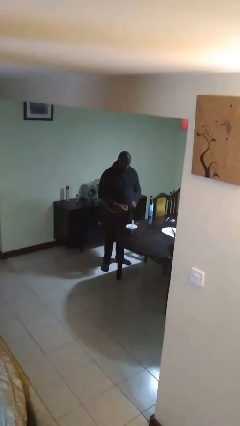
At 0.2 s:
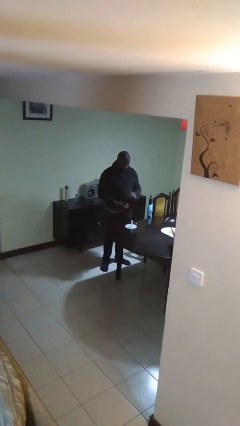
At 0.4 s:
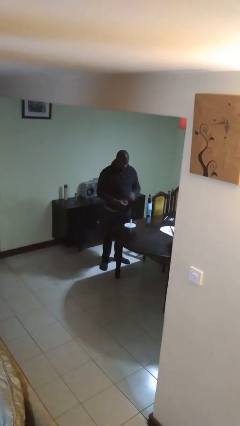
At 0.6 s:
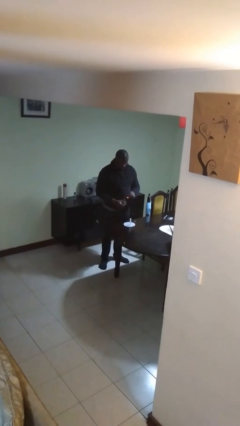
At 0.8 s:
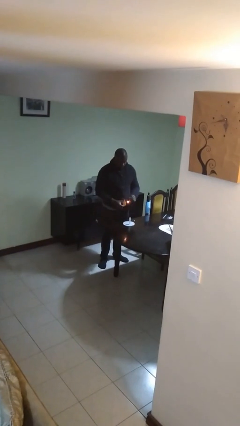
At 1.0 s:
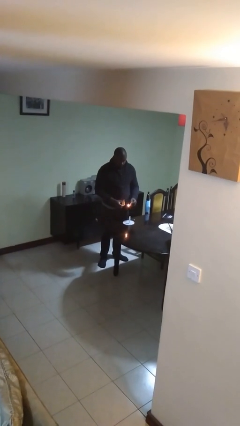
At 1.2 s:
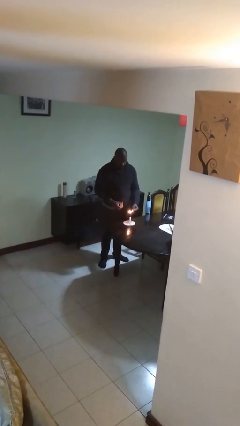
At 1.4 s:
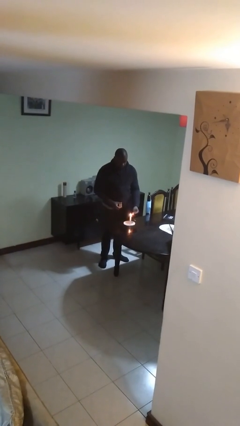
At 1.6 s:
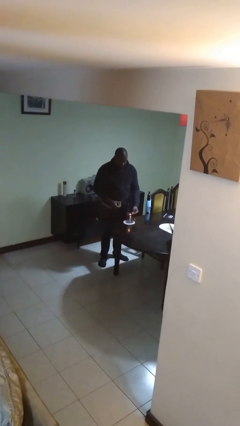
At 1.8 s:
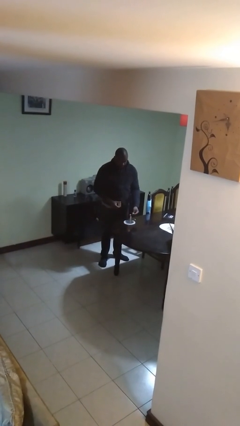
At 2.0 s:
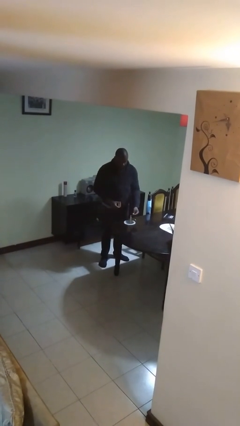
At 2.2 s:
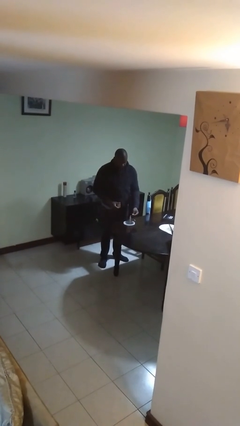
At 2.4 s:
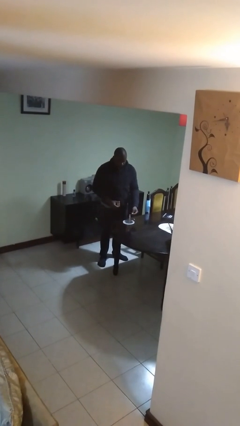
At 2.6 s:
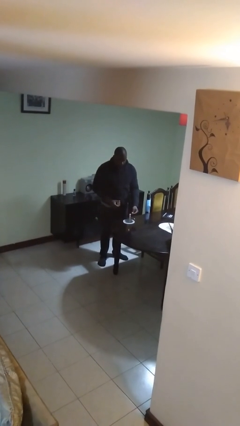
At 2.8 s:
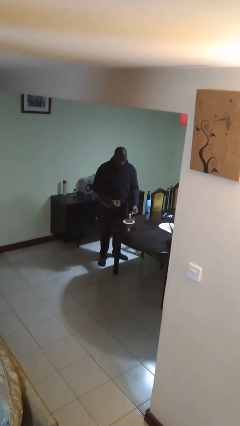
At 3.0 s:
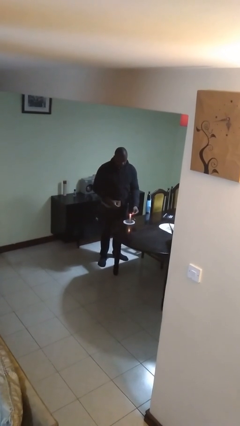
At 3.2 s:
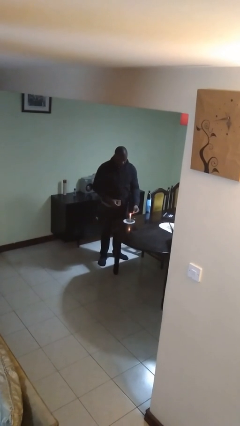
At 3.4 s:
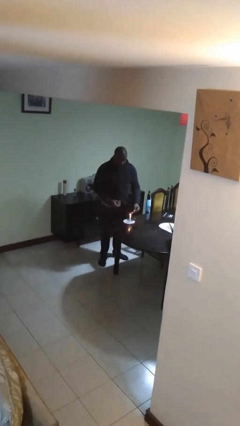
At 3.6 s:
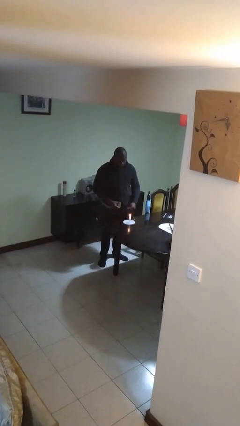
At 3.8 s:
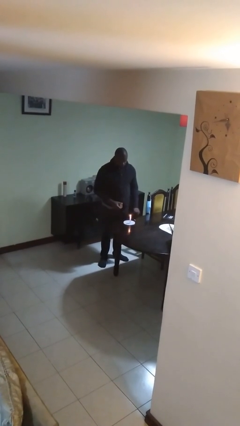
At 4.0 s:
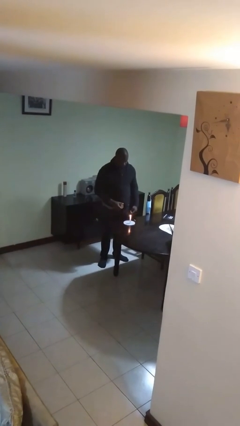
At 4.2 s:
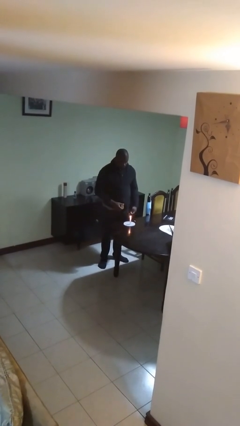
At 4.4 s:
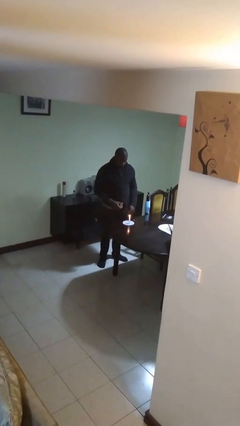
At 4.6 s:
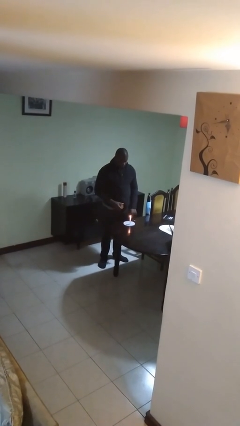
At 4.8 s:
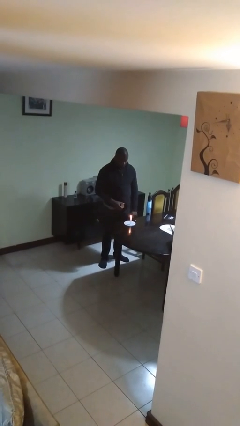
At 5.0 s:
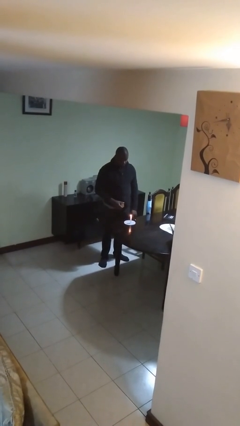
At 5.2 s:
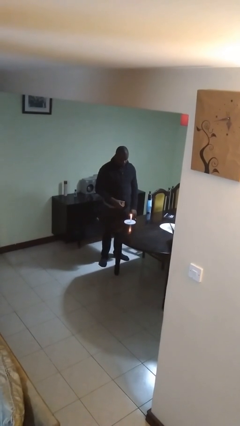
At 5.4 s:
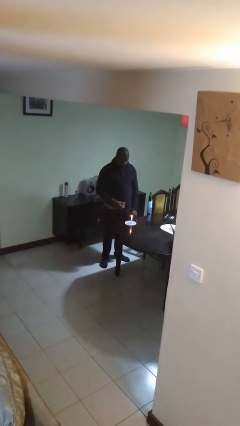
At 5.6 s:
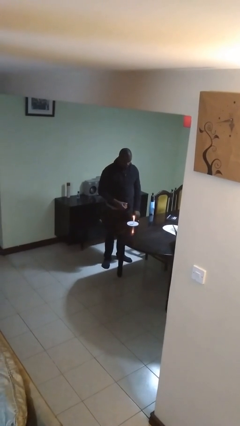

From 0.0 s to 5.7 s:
person lights candle

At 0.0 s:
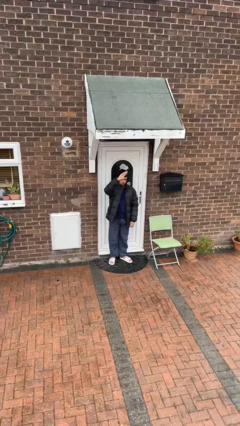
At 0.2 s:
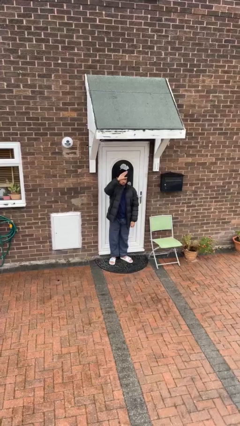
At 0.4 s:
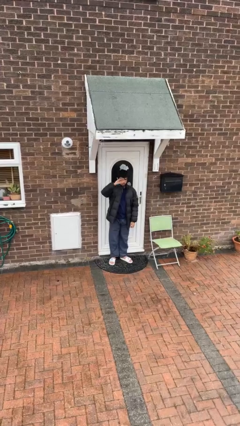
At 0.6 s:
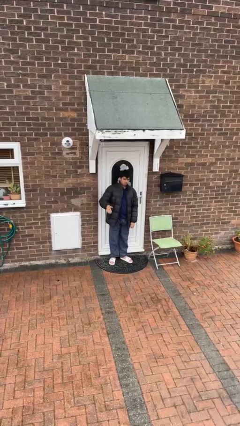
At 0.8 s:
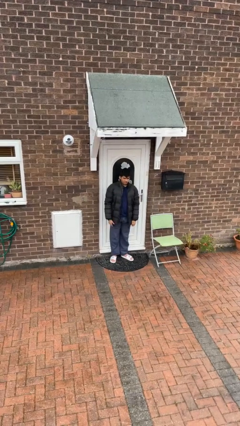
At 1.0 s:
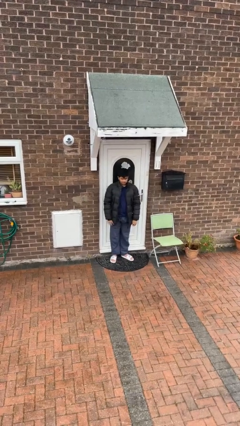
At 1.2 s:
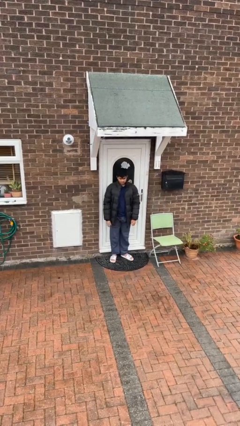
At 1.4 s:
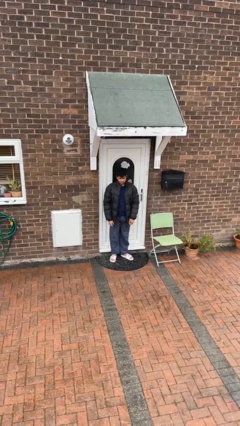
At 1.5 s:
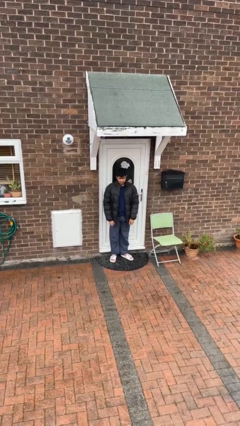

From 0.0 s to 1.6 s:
person gestures lower hand

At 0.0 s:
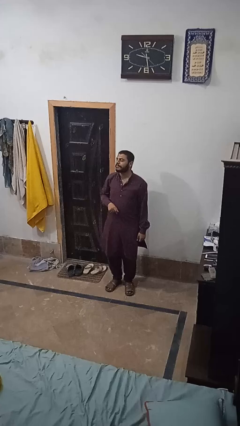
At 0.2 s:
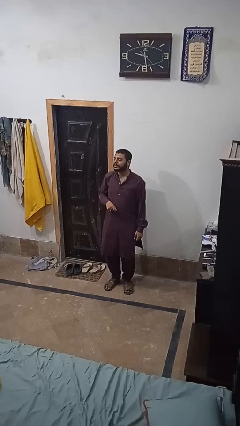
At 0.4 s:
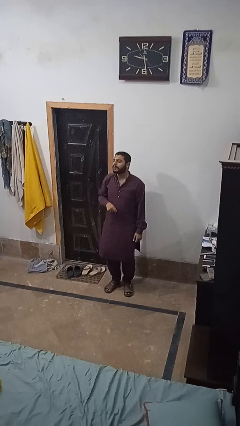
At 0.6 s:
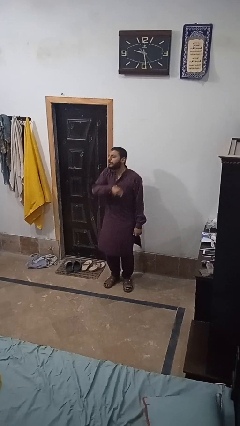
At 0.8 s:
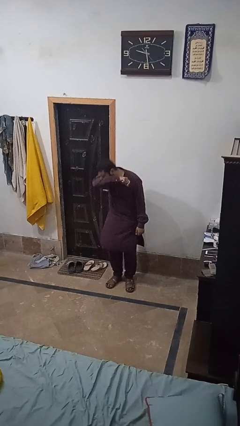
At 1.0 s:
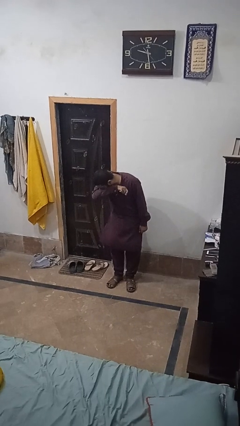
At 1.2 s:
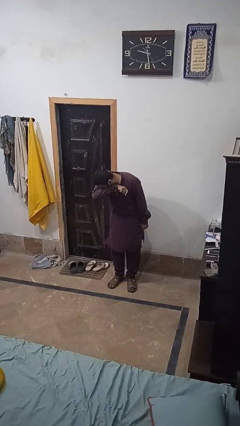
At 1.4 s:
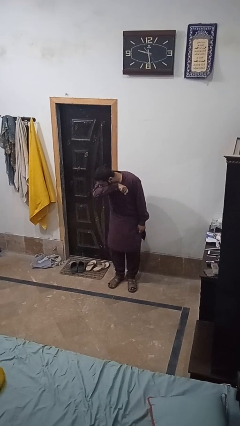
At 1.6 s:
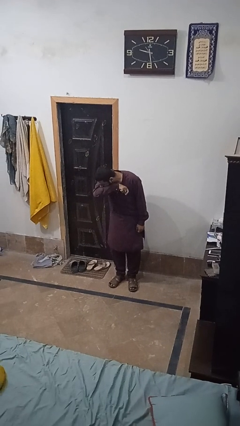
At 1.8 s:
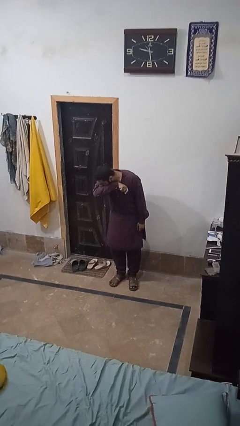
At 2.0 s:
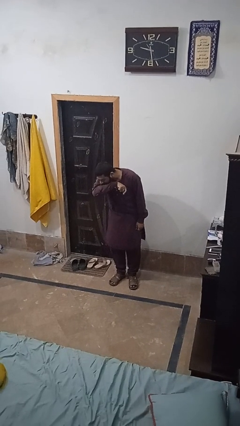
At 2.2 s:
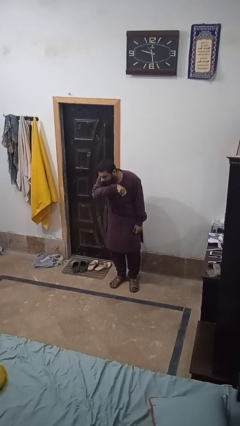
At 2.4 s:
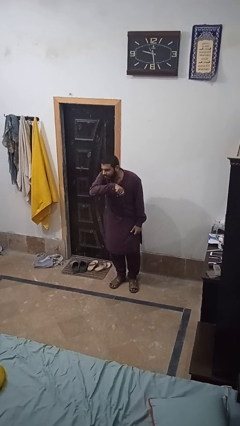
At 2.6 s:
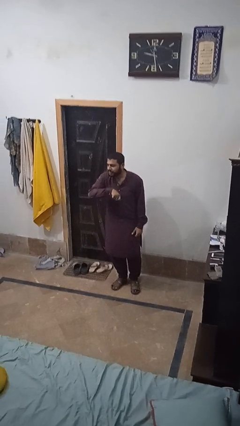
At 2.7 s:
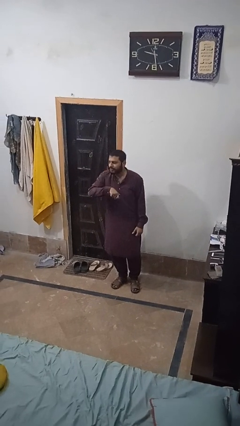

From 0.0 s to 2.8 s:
person sneezes into arm

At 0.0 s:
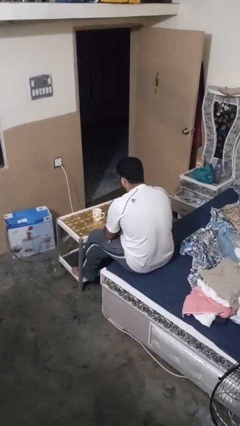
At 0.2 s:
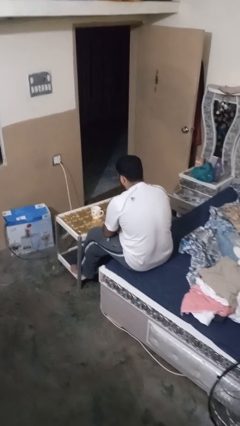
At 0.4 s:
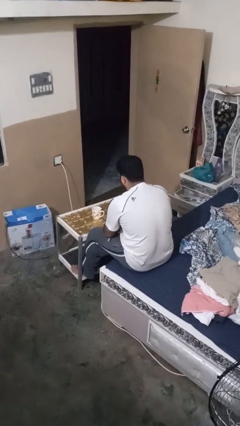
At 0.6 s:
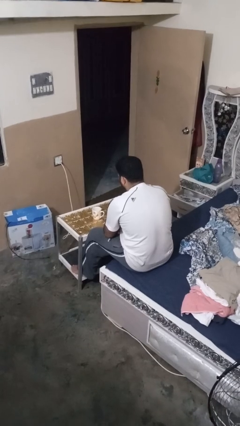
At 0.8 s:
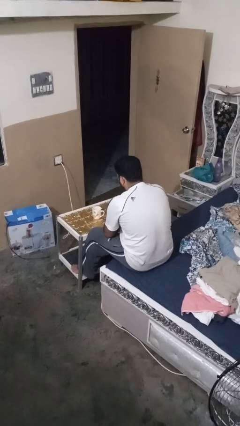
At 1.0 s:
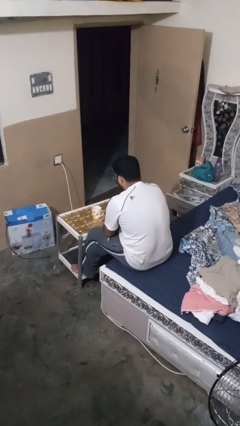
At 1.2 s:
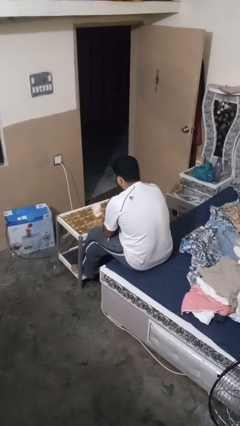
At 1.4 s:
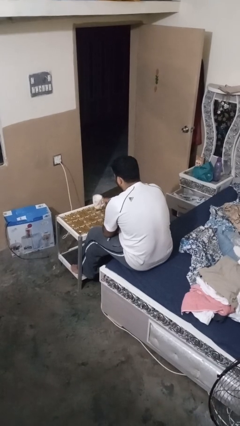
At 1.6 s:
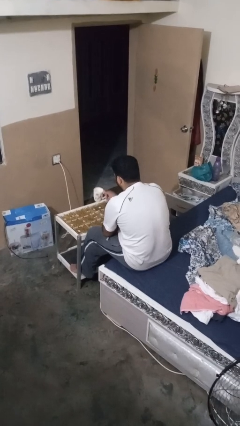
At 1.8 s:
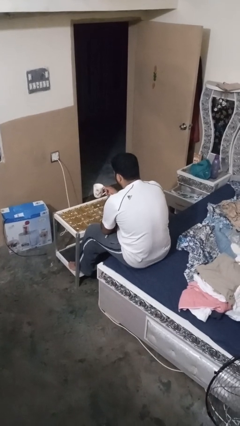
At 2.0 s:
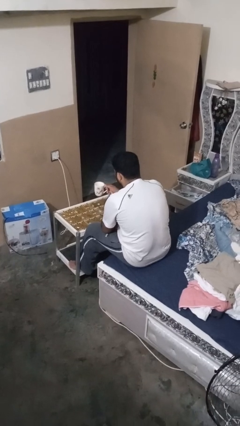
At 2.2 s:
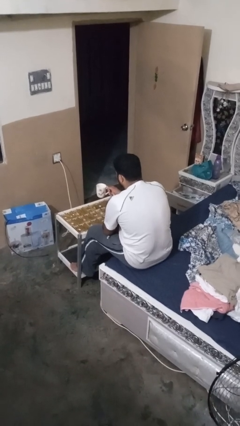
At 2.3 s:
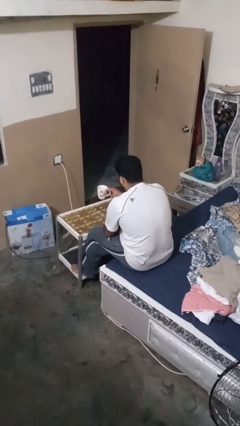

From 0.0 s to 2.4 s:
person picks up object from table

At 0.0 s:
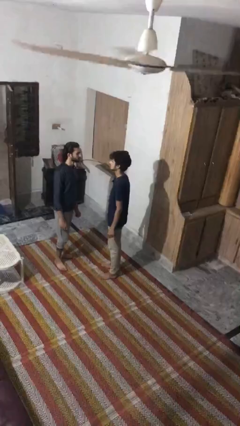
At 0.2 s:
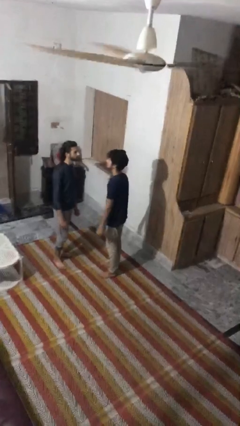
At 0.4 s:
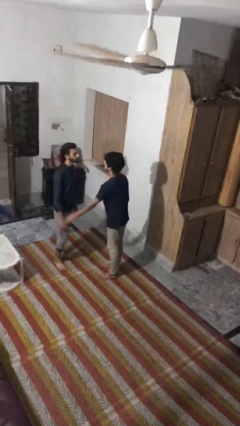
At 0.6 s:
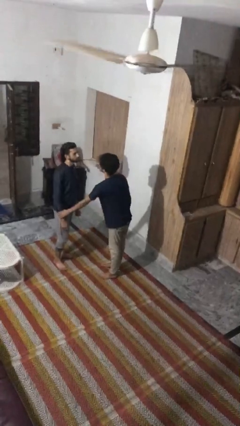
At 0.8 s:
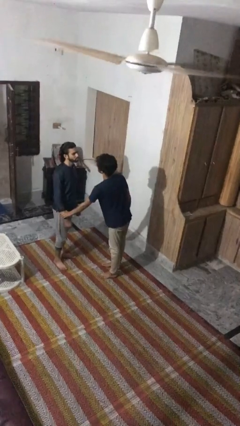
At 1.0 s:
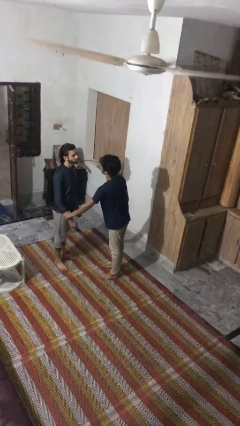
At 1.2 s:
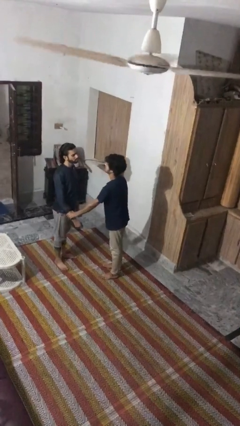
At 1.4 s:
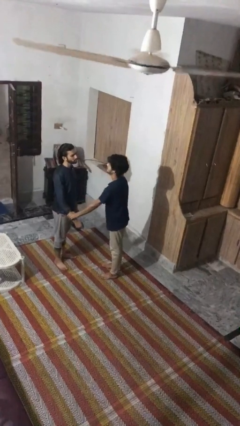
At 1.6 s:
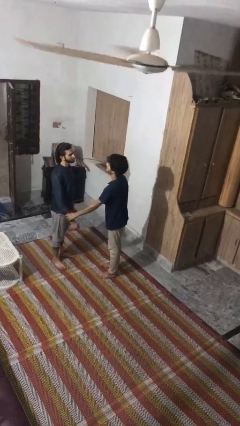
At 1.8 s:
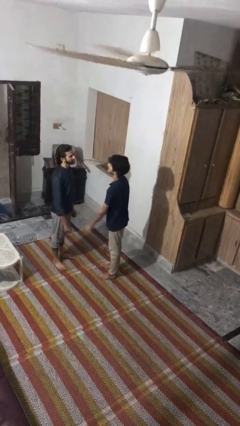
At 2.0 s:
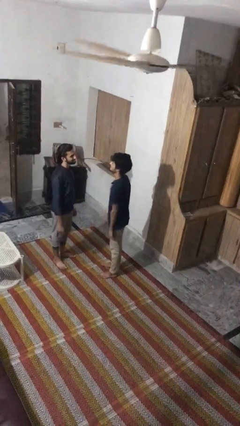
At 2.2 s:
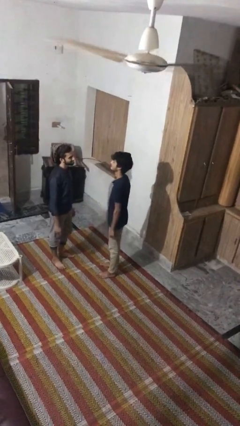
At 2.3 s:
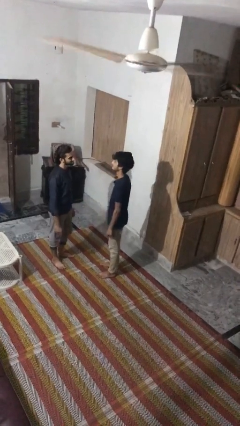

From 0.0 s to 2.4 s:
person grabs person by forearm

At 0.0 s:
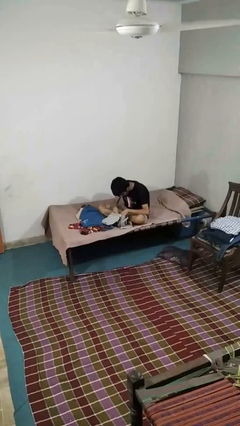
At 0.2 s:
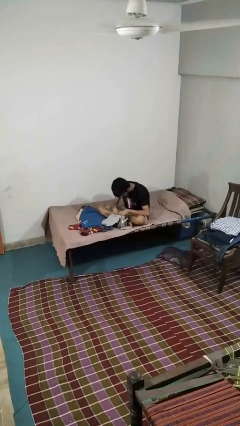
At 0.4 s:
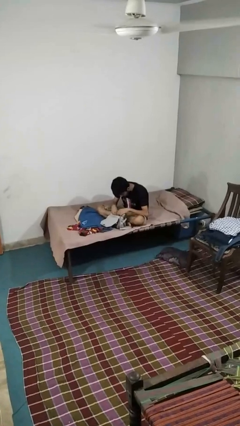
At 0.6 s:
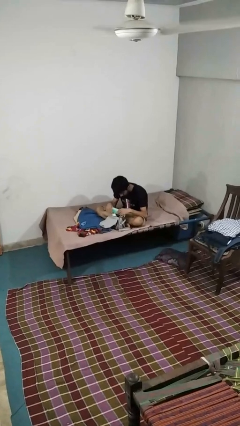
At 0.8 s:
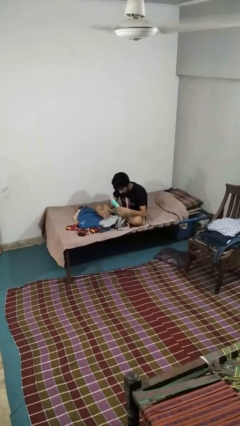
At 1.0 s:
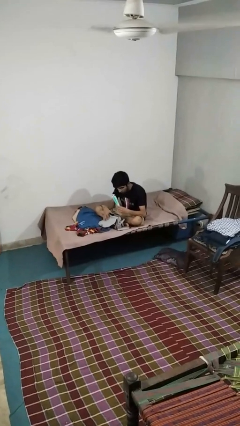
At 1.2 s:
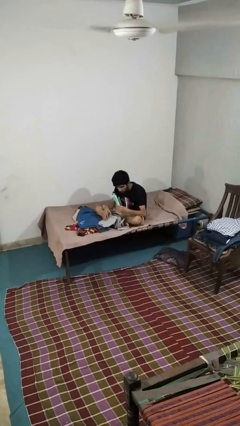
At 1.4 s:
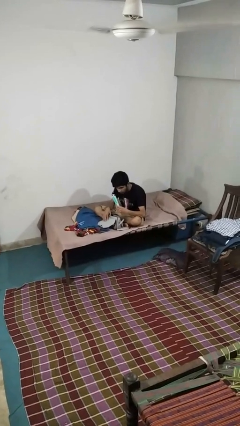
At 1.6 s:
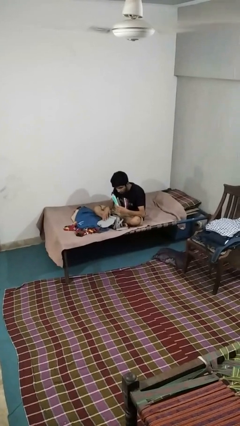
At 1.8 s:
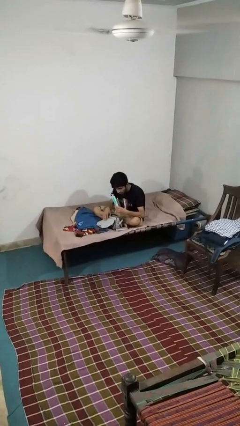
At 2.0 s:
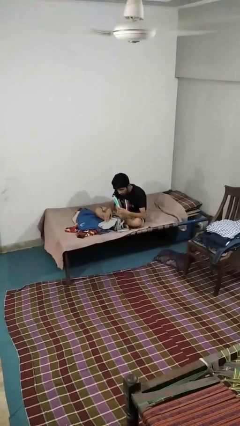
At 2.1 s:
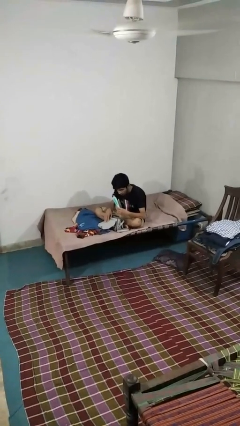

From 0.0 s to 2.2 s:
person takes object from purse
